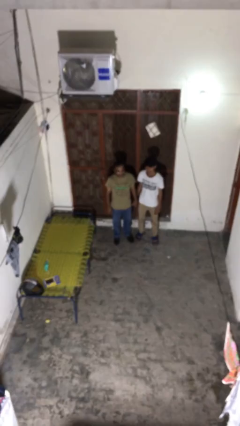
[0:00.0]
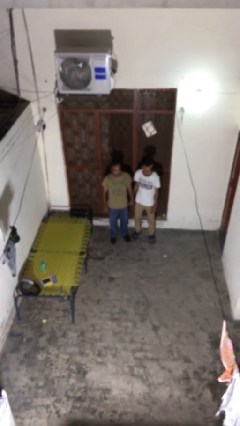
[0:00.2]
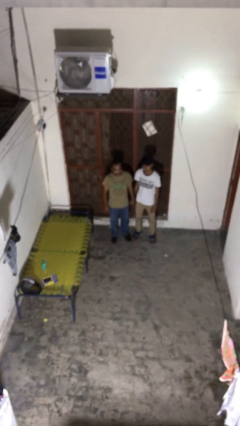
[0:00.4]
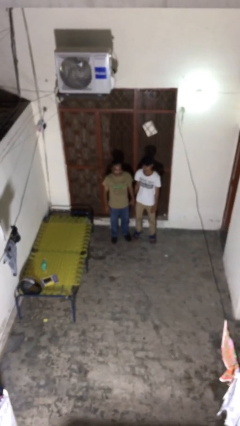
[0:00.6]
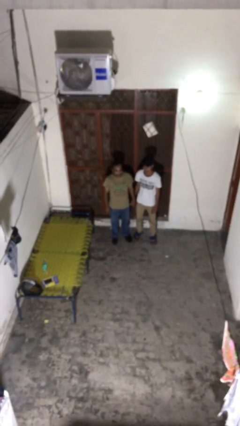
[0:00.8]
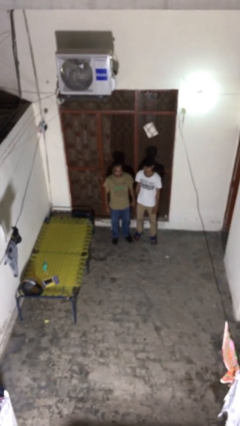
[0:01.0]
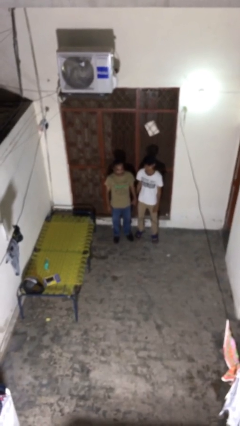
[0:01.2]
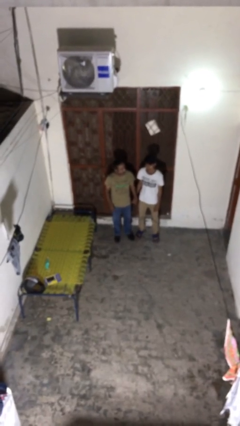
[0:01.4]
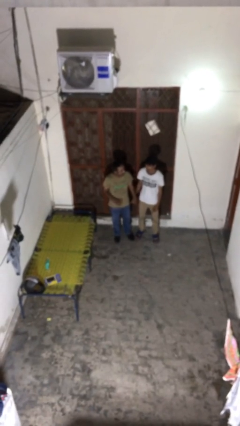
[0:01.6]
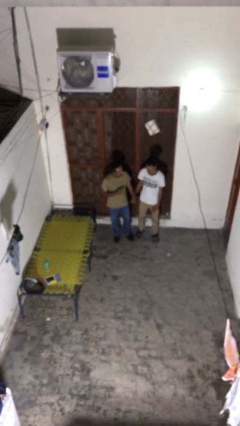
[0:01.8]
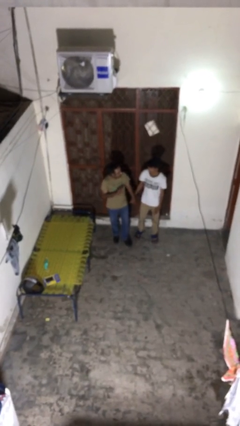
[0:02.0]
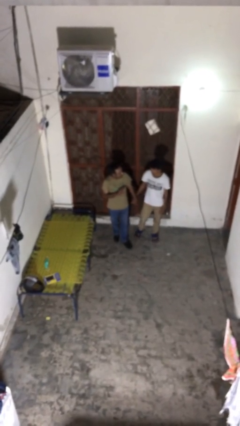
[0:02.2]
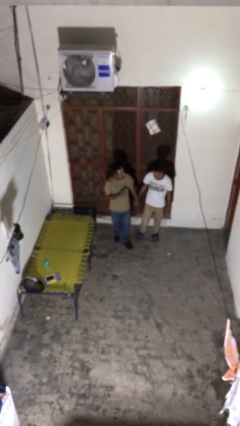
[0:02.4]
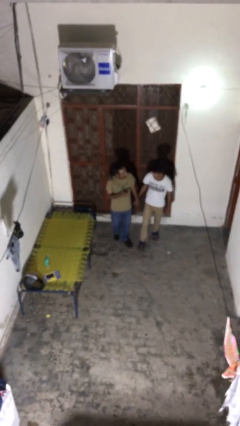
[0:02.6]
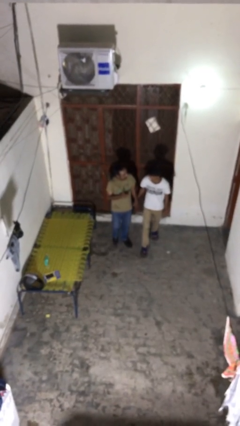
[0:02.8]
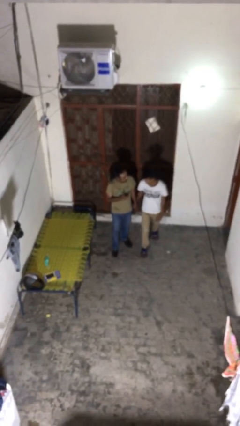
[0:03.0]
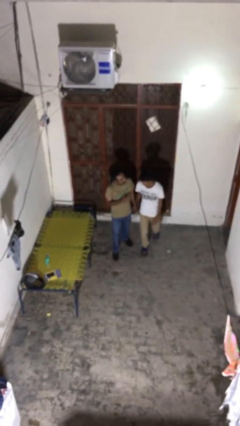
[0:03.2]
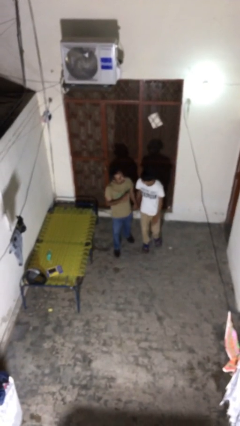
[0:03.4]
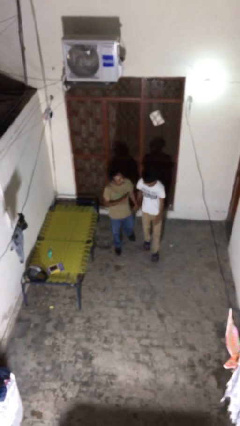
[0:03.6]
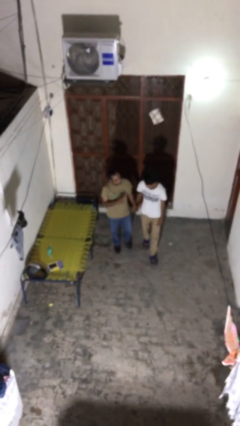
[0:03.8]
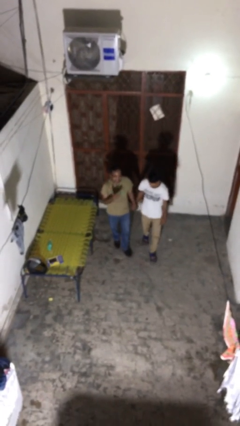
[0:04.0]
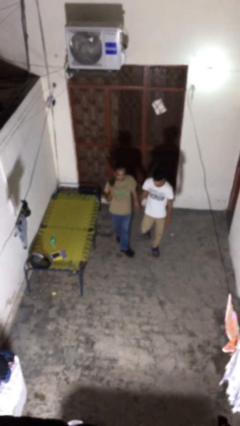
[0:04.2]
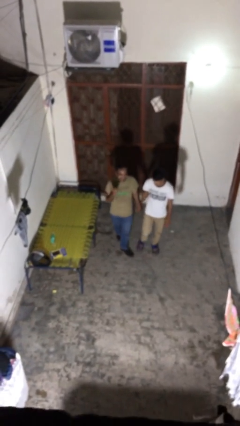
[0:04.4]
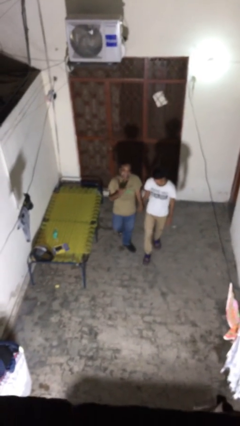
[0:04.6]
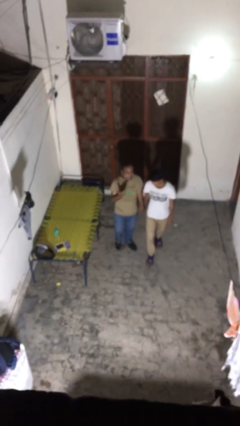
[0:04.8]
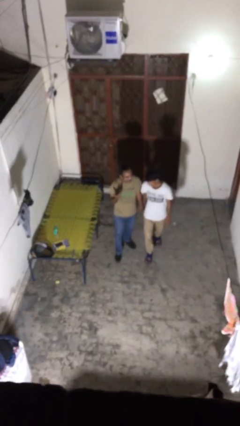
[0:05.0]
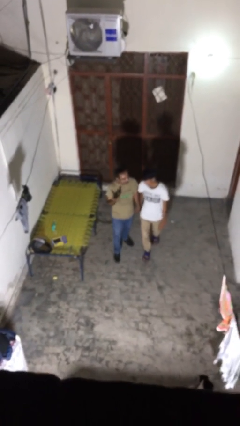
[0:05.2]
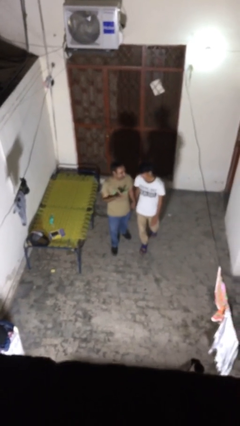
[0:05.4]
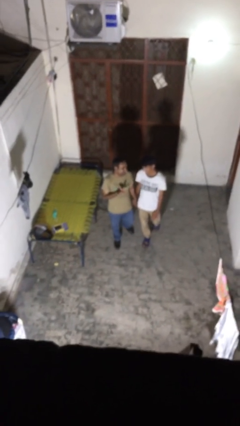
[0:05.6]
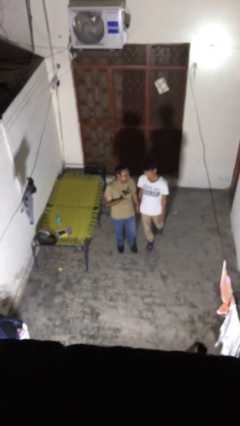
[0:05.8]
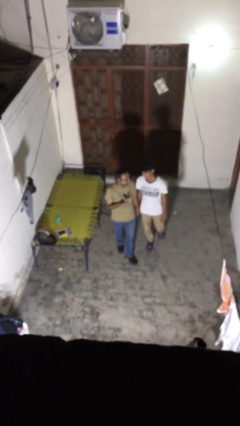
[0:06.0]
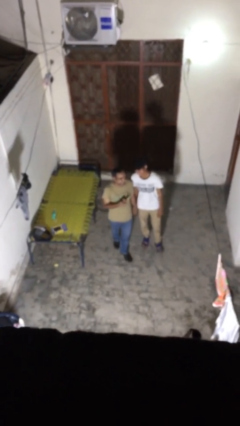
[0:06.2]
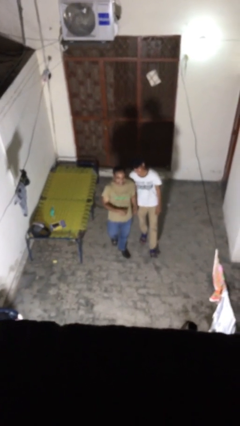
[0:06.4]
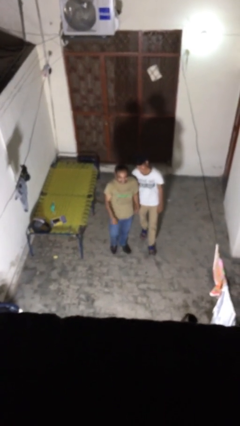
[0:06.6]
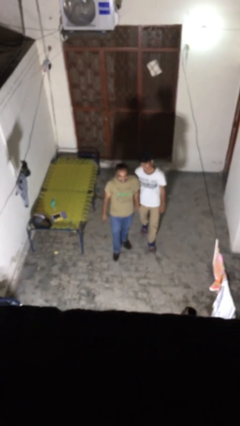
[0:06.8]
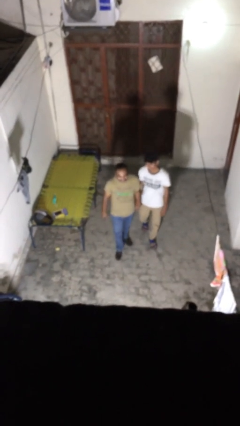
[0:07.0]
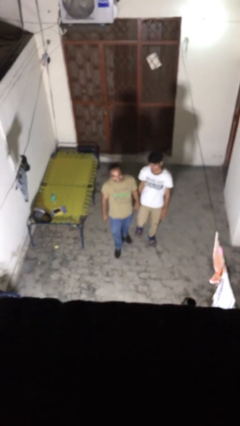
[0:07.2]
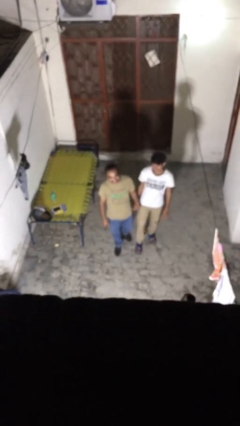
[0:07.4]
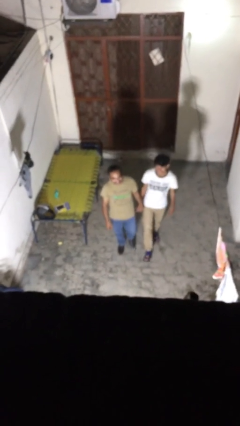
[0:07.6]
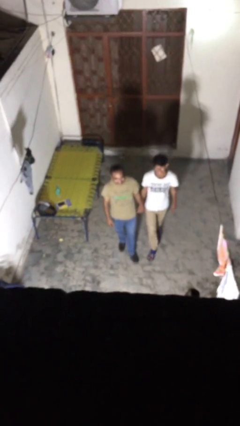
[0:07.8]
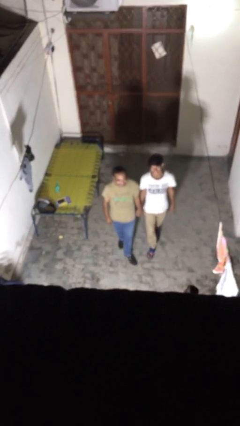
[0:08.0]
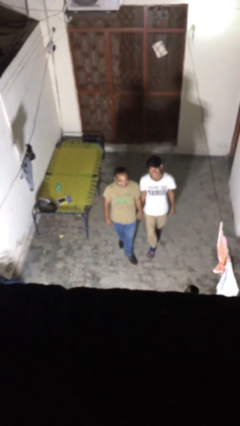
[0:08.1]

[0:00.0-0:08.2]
person holds hand

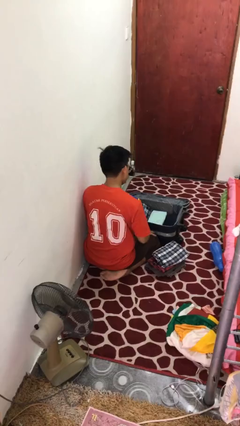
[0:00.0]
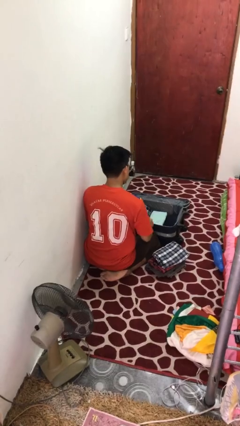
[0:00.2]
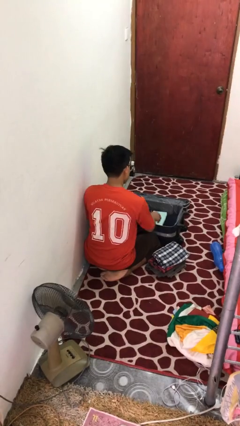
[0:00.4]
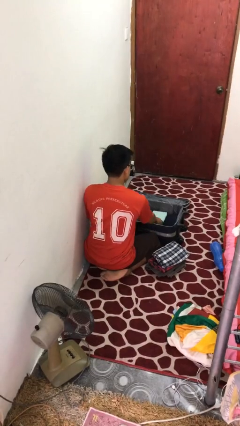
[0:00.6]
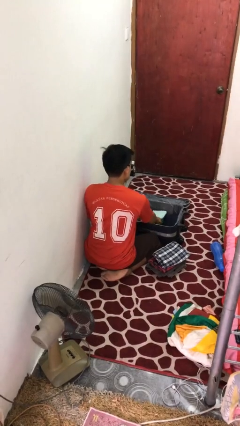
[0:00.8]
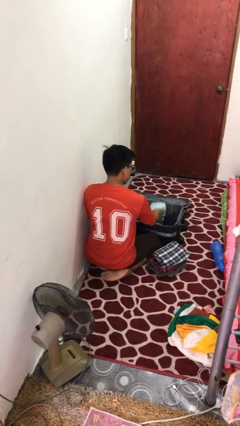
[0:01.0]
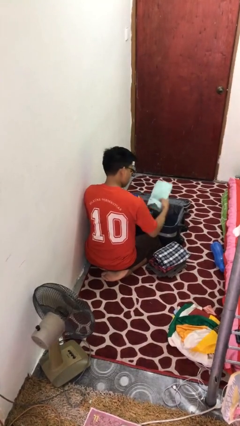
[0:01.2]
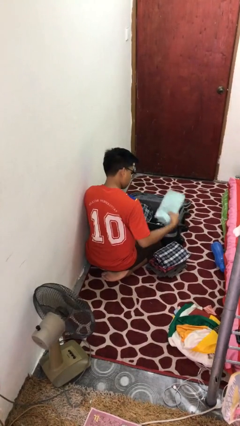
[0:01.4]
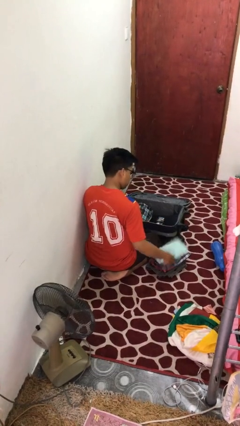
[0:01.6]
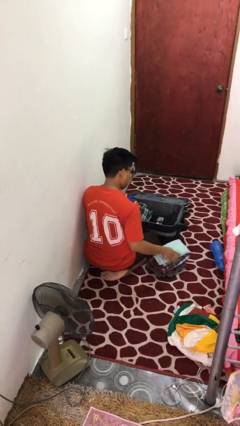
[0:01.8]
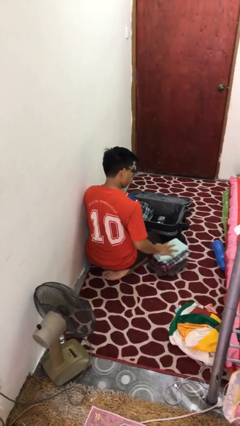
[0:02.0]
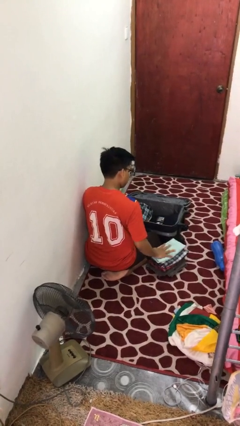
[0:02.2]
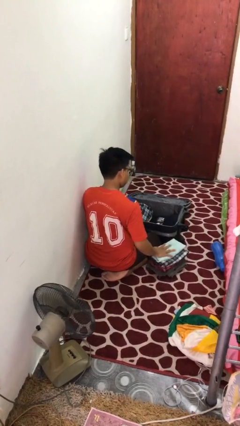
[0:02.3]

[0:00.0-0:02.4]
person unloads clothes from suitcase

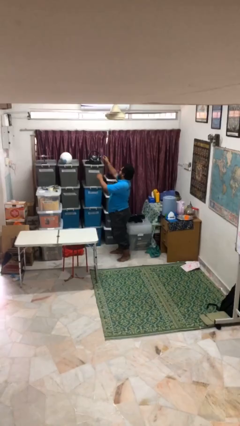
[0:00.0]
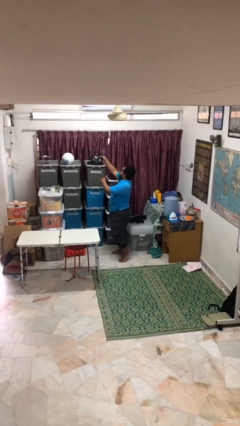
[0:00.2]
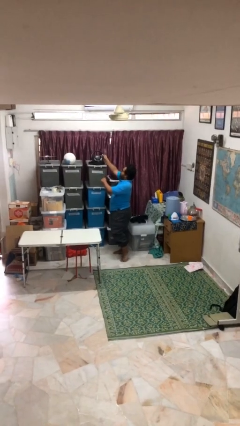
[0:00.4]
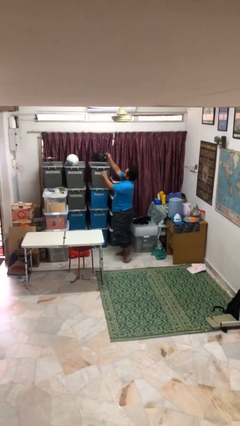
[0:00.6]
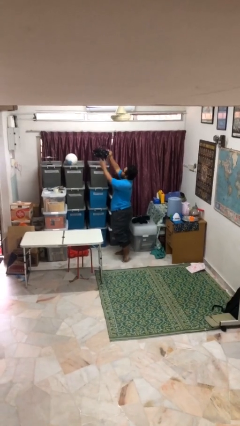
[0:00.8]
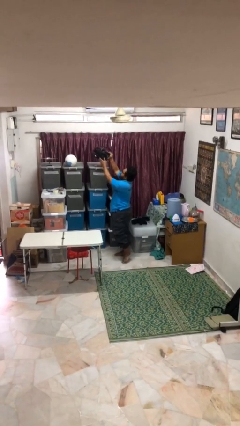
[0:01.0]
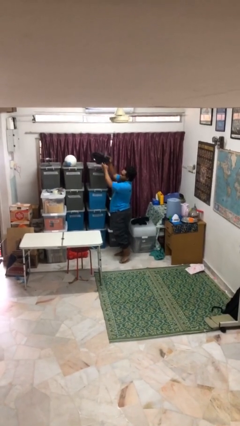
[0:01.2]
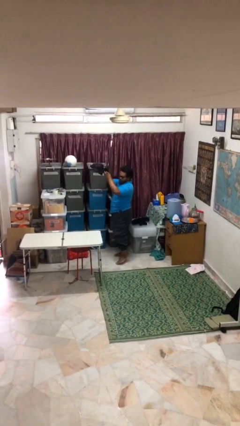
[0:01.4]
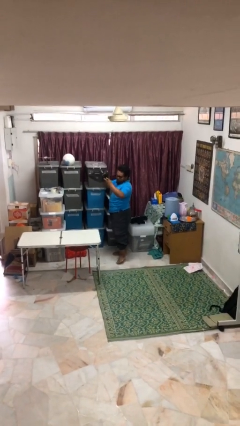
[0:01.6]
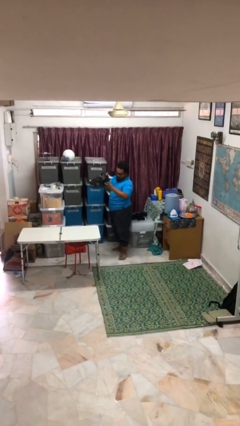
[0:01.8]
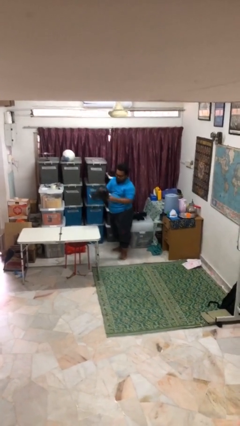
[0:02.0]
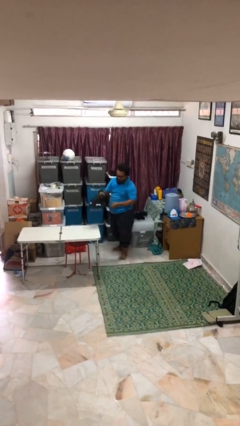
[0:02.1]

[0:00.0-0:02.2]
person picks up object from shelf

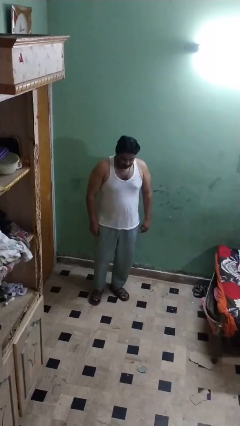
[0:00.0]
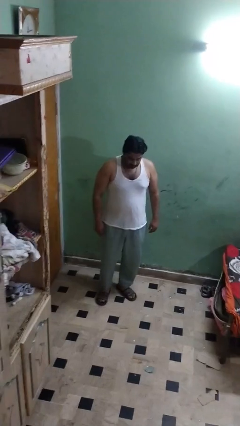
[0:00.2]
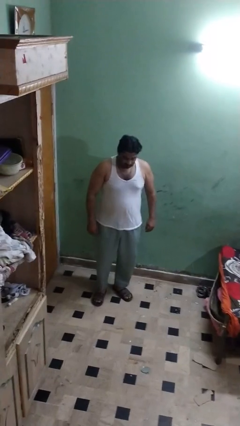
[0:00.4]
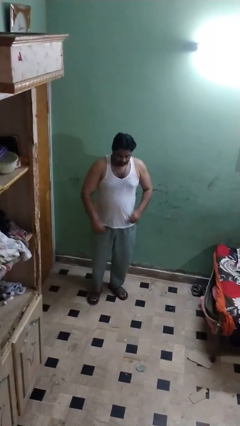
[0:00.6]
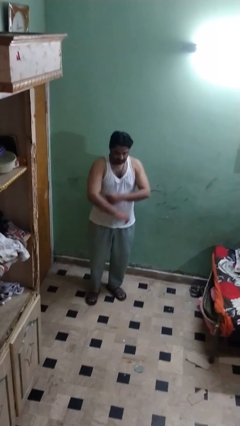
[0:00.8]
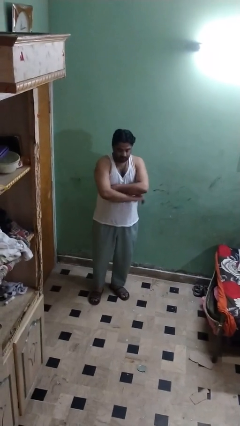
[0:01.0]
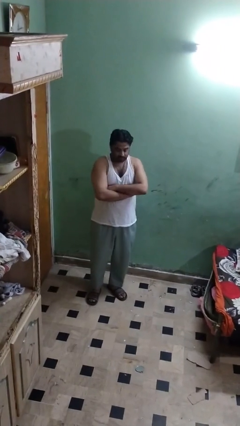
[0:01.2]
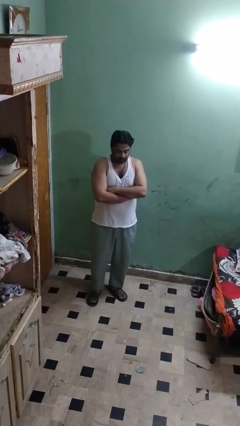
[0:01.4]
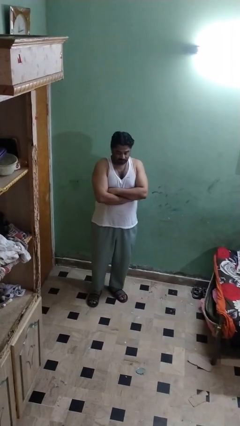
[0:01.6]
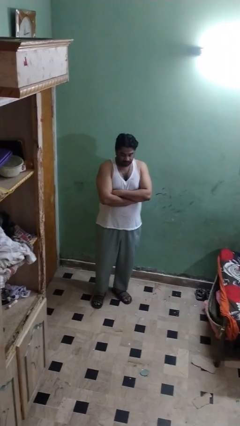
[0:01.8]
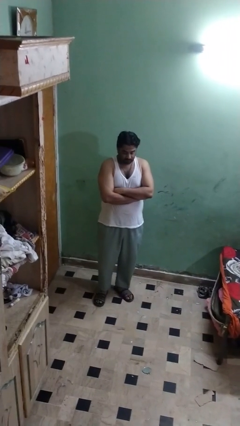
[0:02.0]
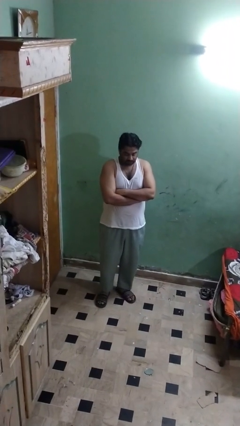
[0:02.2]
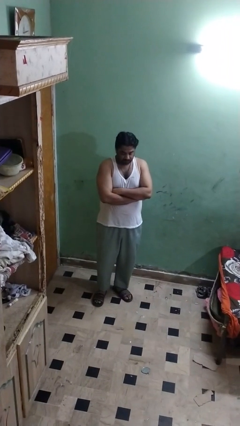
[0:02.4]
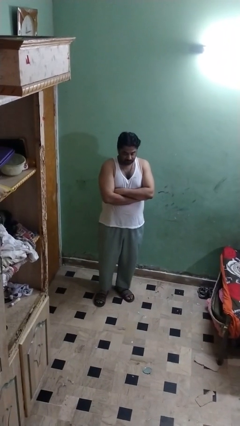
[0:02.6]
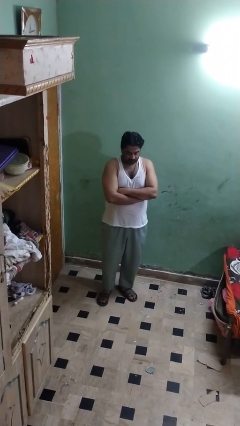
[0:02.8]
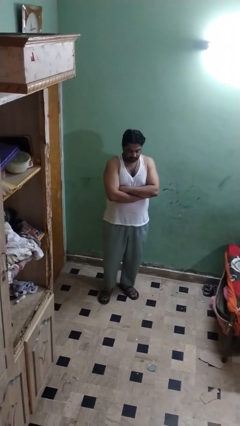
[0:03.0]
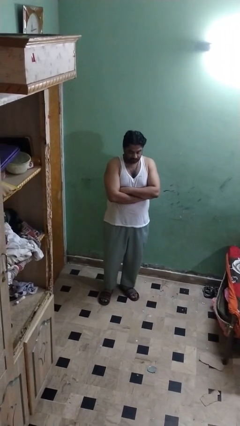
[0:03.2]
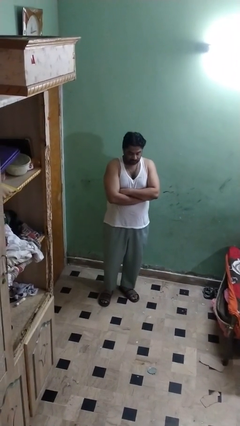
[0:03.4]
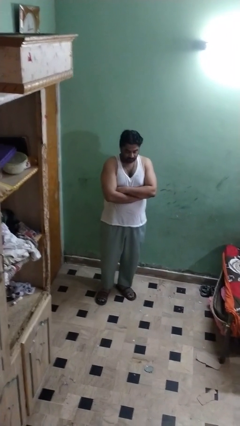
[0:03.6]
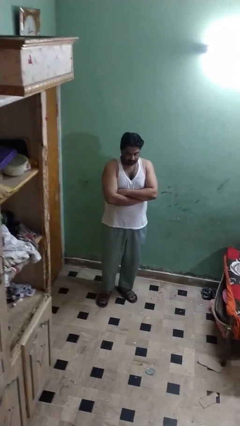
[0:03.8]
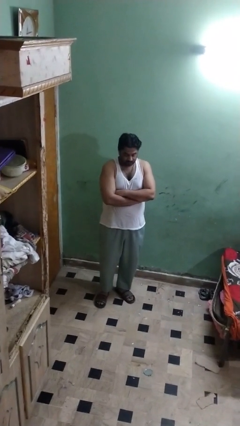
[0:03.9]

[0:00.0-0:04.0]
person crosses arms

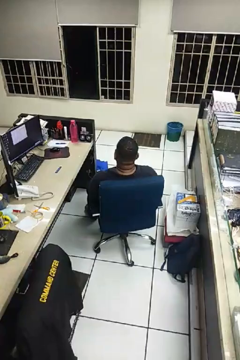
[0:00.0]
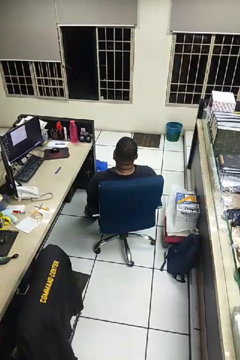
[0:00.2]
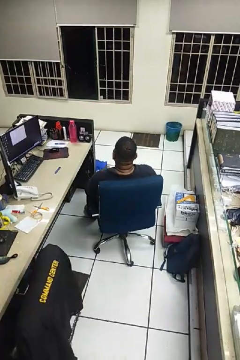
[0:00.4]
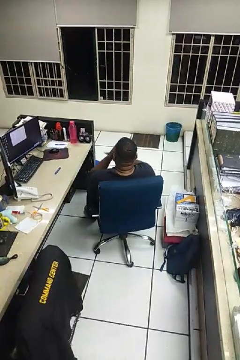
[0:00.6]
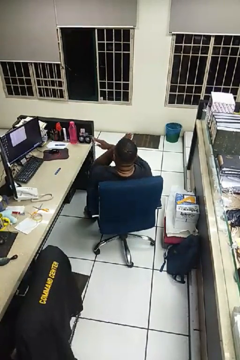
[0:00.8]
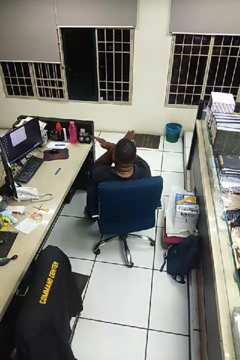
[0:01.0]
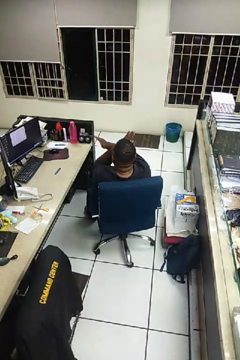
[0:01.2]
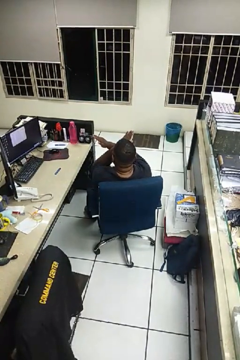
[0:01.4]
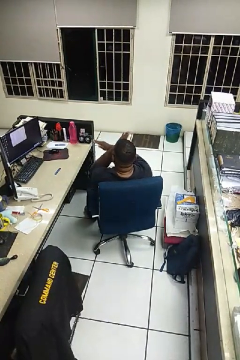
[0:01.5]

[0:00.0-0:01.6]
person gestures arms x
